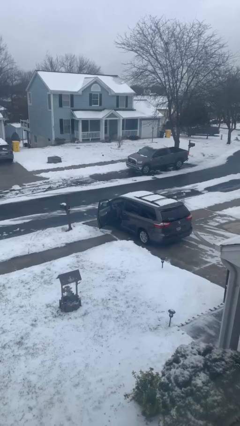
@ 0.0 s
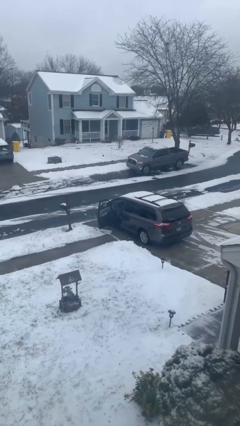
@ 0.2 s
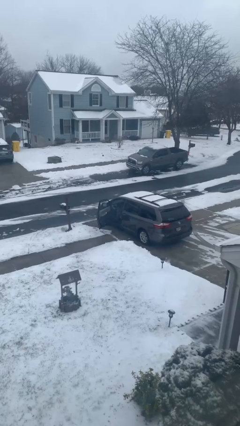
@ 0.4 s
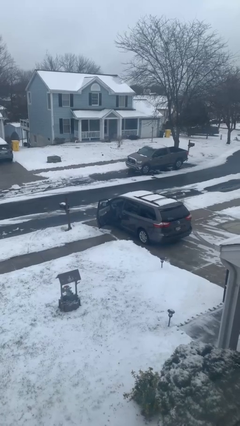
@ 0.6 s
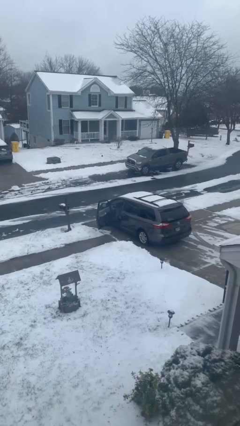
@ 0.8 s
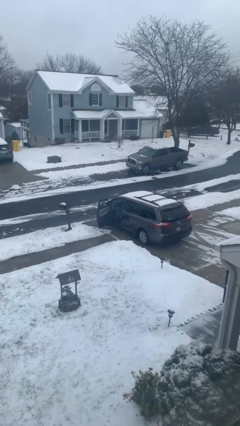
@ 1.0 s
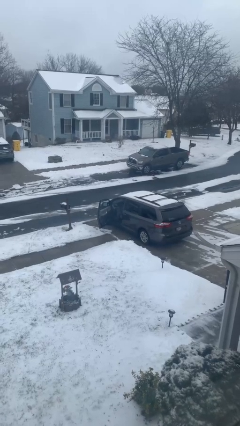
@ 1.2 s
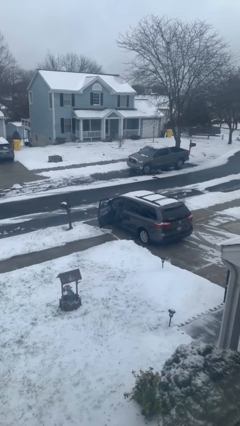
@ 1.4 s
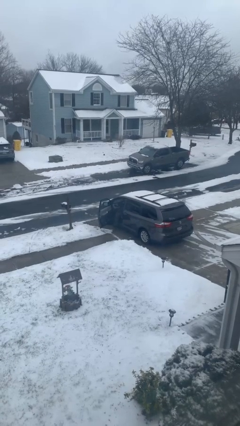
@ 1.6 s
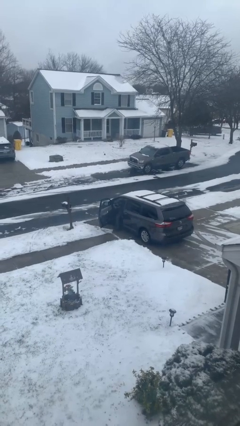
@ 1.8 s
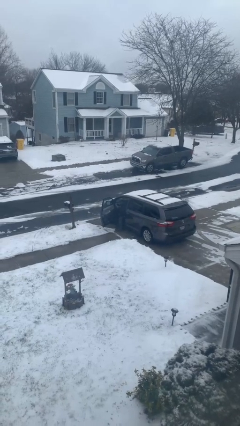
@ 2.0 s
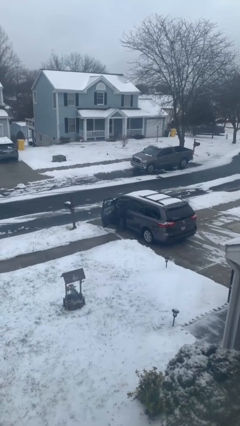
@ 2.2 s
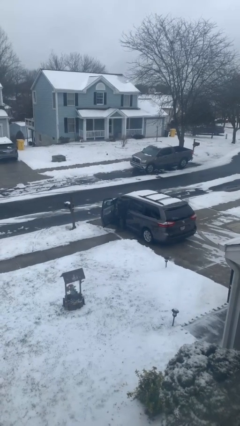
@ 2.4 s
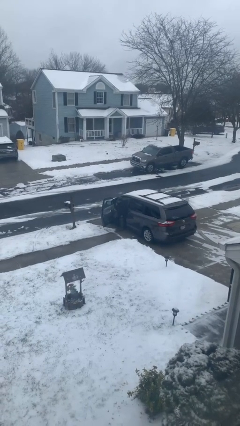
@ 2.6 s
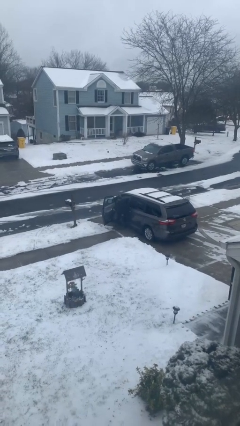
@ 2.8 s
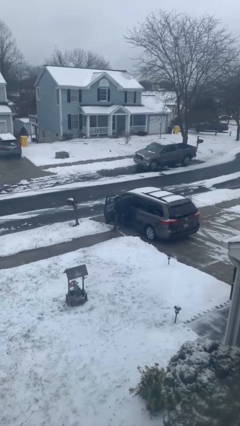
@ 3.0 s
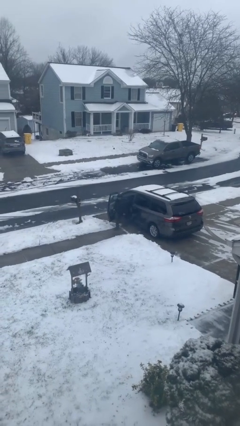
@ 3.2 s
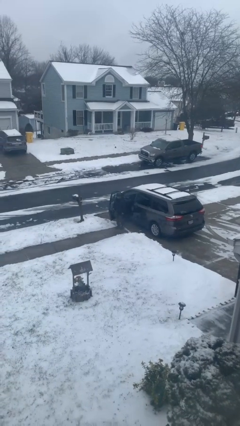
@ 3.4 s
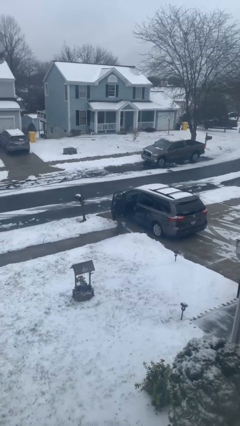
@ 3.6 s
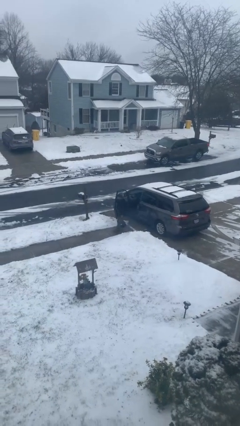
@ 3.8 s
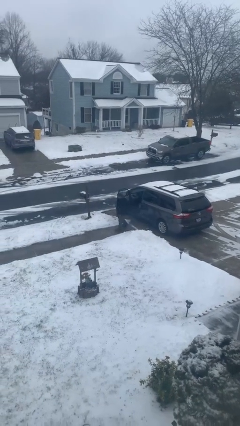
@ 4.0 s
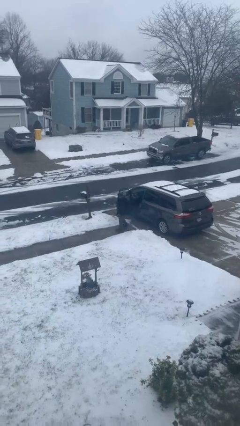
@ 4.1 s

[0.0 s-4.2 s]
person exits car

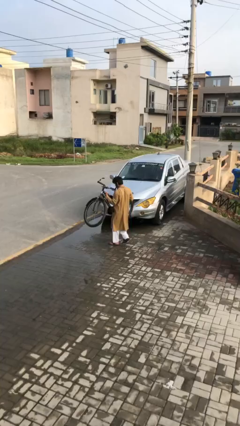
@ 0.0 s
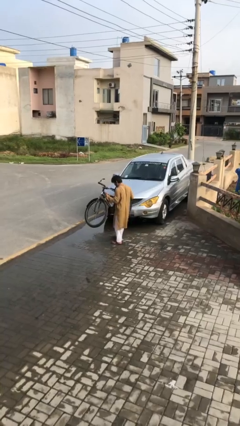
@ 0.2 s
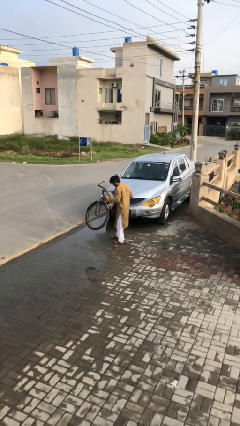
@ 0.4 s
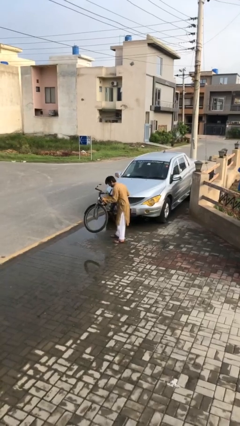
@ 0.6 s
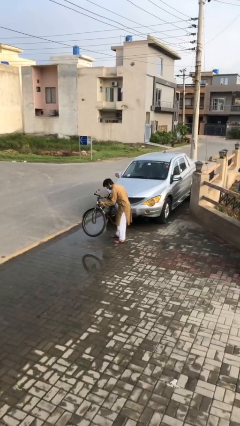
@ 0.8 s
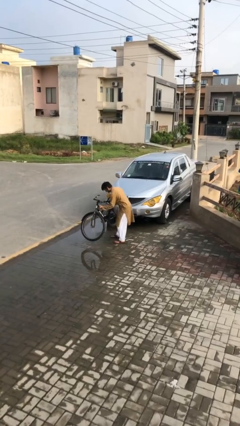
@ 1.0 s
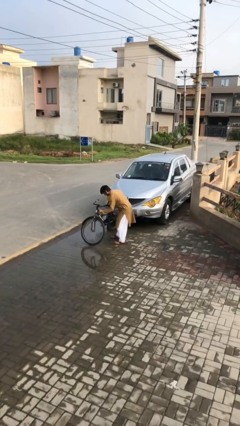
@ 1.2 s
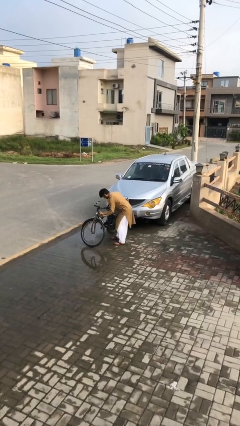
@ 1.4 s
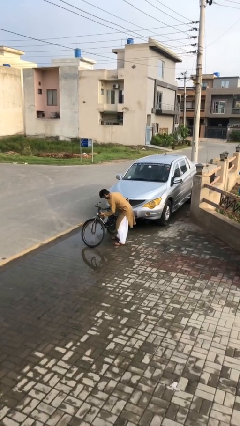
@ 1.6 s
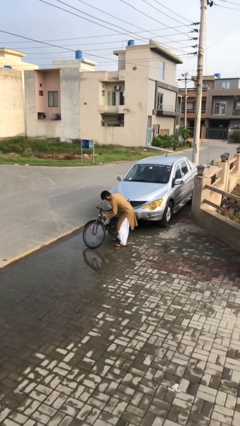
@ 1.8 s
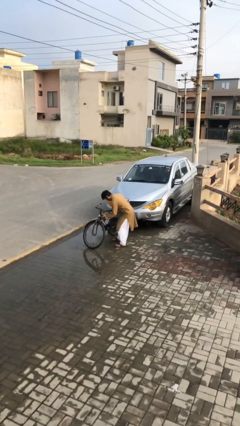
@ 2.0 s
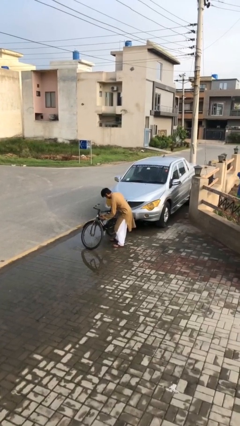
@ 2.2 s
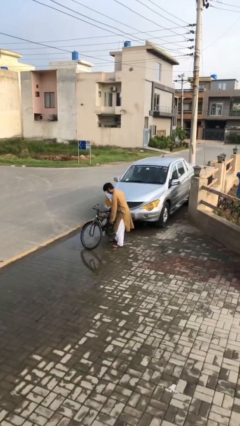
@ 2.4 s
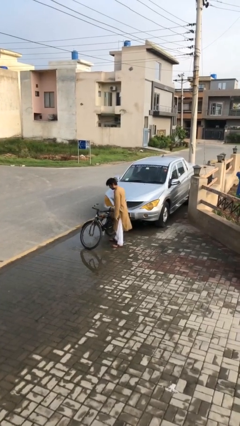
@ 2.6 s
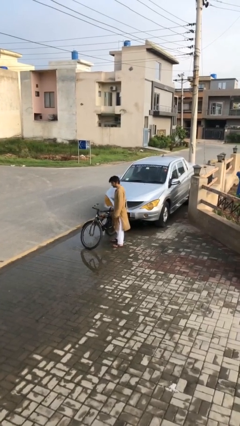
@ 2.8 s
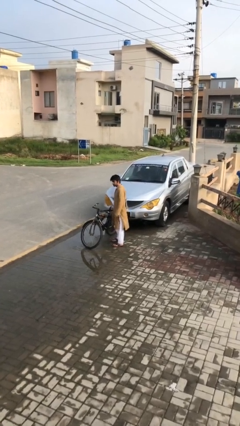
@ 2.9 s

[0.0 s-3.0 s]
person puts down object on floor

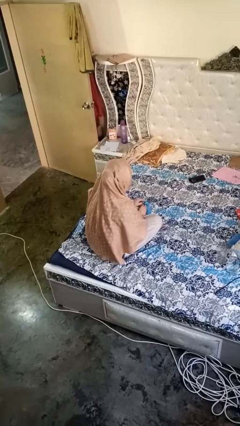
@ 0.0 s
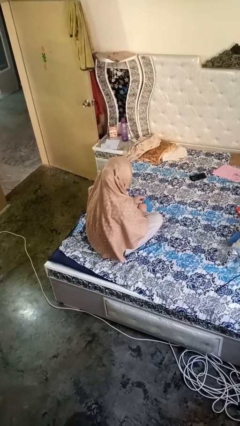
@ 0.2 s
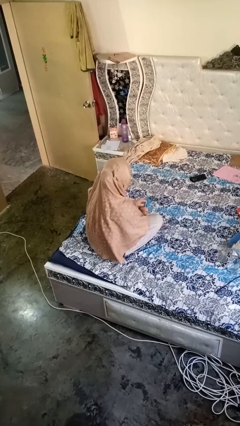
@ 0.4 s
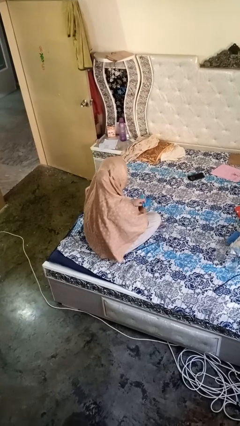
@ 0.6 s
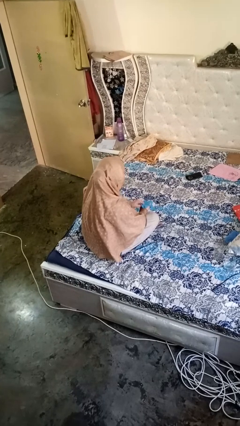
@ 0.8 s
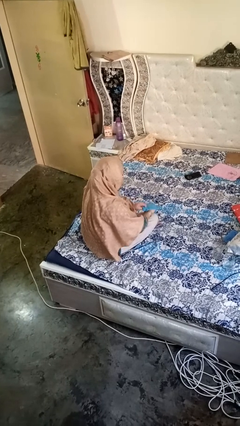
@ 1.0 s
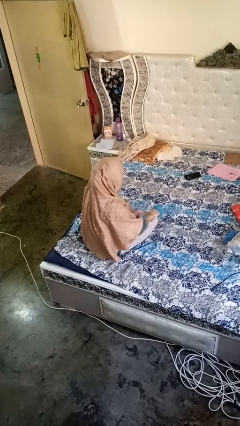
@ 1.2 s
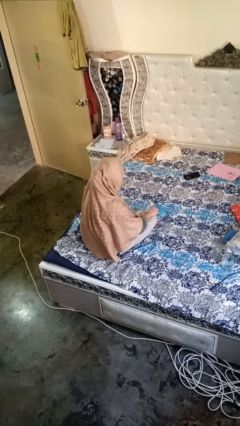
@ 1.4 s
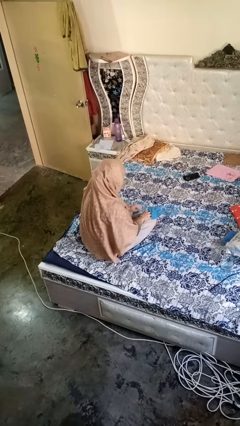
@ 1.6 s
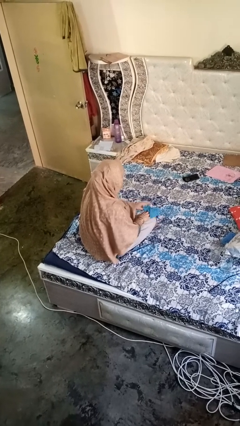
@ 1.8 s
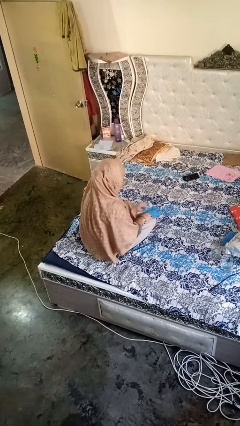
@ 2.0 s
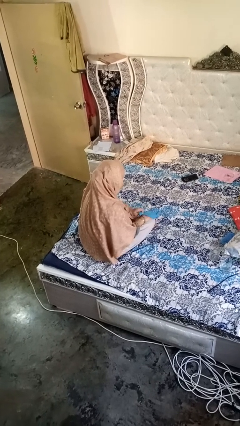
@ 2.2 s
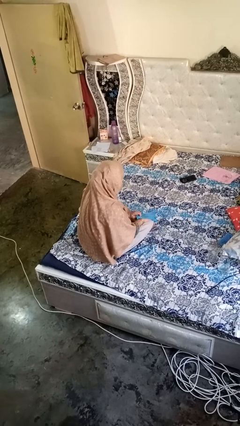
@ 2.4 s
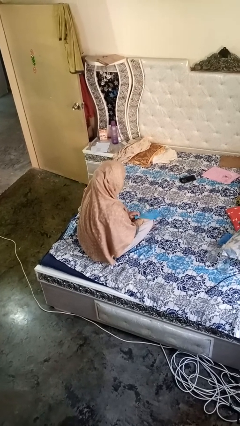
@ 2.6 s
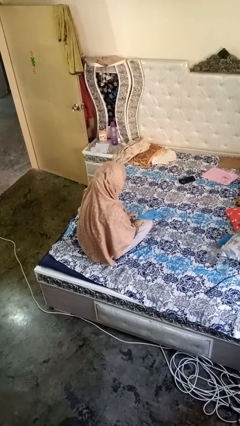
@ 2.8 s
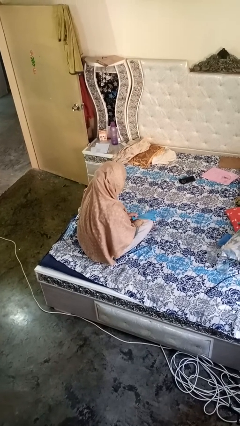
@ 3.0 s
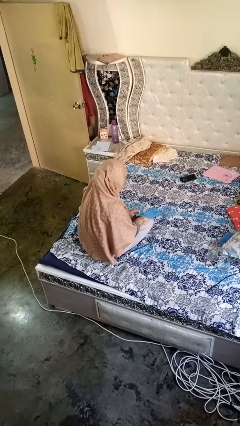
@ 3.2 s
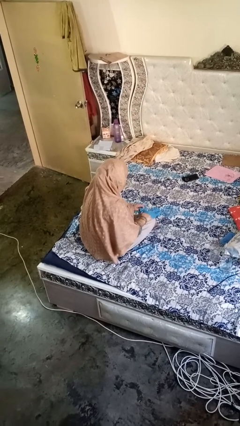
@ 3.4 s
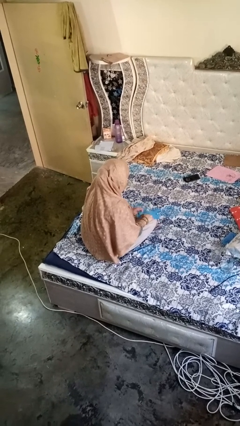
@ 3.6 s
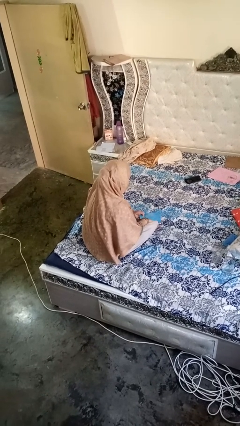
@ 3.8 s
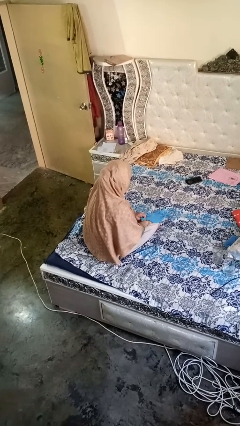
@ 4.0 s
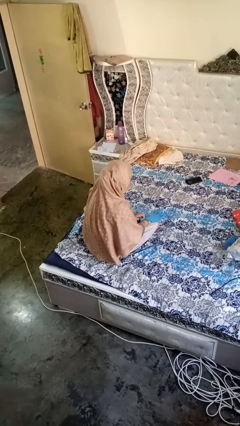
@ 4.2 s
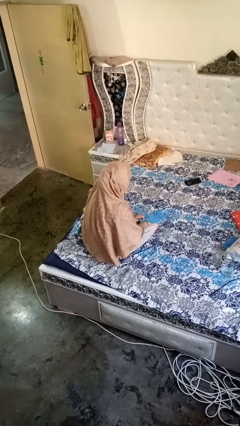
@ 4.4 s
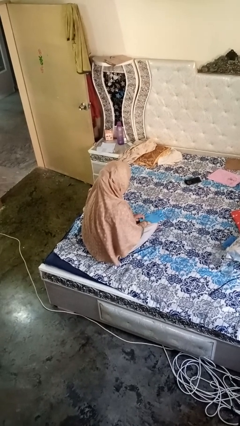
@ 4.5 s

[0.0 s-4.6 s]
person puts on gloves

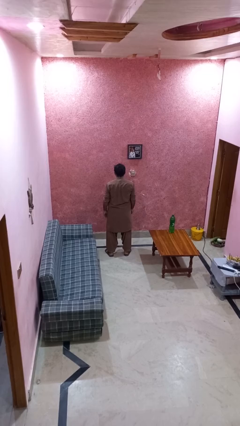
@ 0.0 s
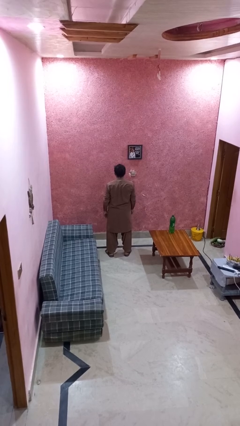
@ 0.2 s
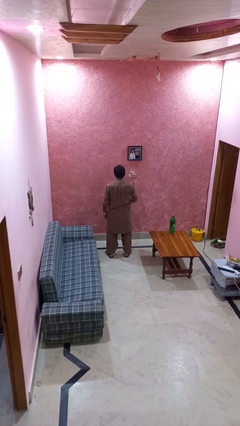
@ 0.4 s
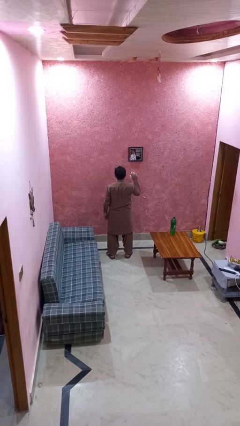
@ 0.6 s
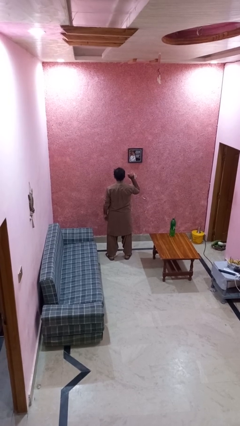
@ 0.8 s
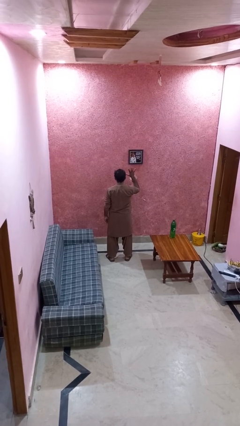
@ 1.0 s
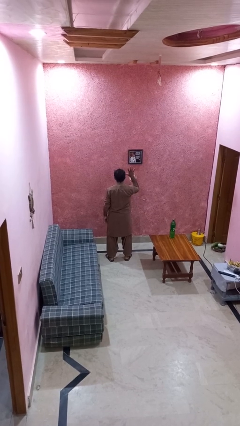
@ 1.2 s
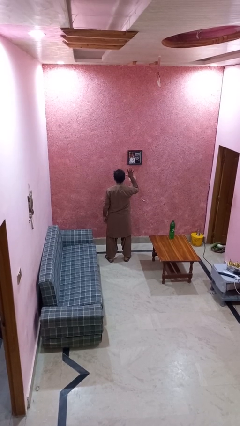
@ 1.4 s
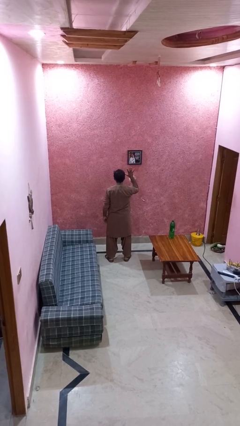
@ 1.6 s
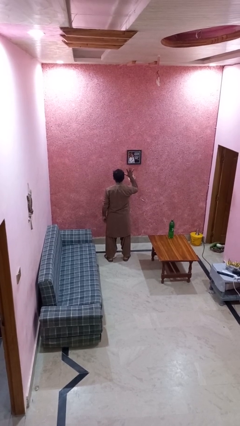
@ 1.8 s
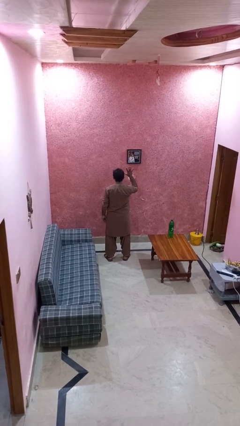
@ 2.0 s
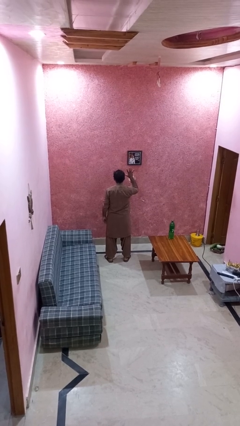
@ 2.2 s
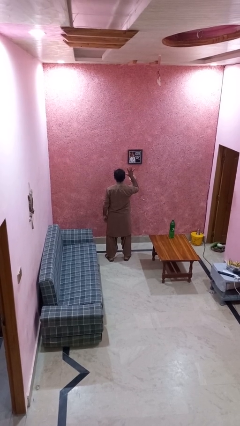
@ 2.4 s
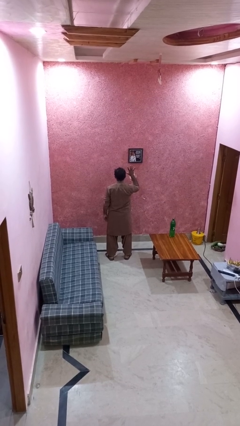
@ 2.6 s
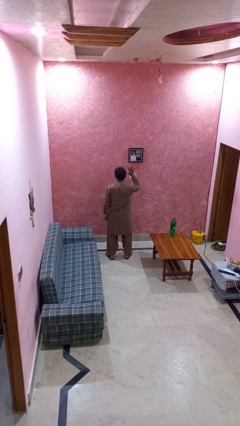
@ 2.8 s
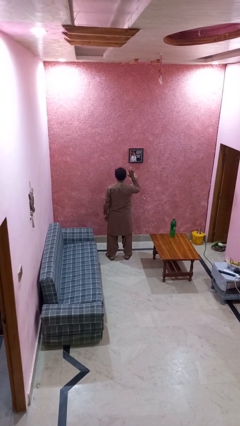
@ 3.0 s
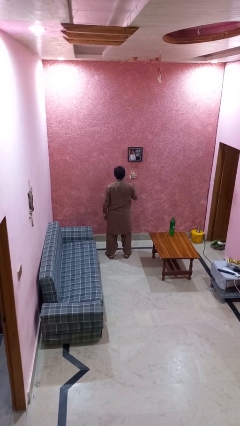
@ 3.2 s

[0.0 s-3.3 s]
person gestures number five

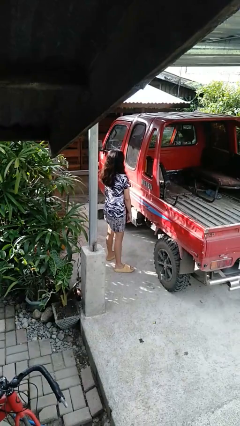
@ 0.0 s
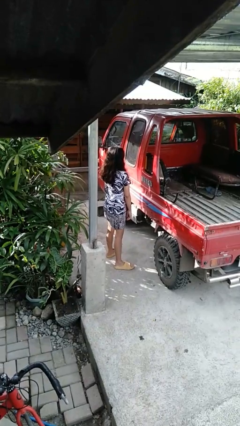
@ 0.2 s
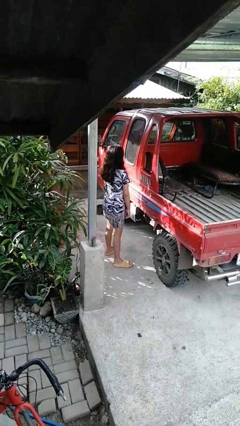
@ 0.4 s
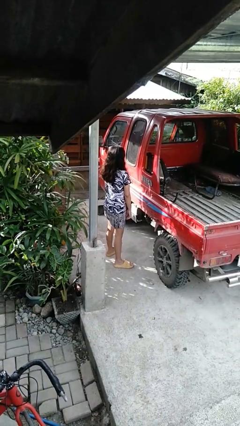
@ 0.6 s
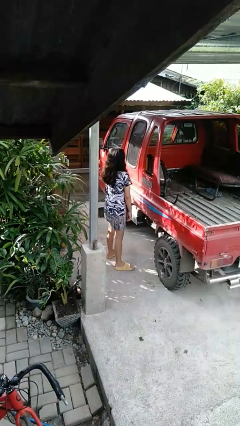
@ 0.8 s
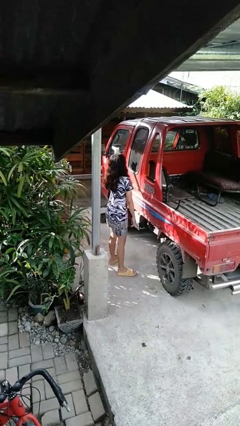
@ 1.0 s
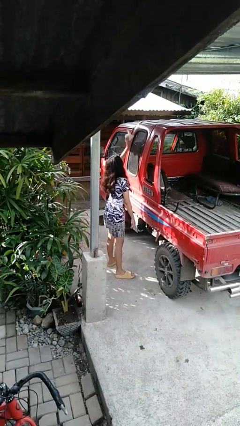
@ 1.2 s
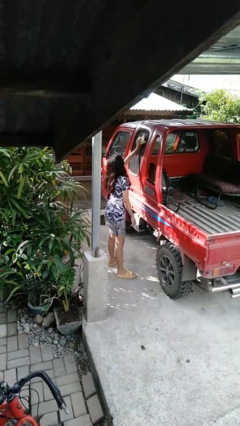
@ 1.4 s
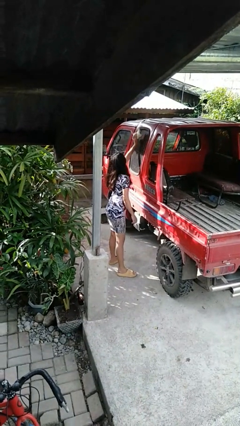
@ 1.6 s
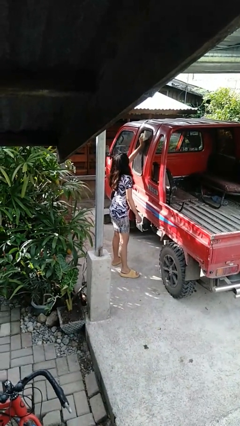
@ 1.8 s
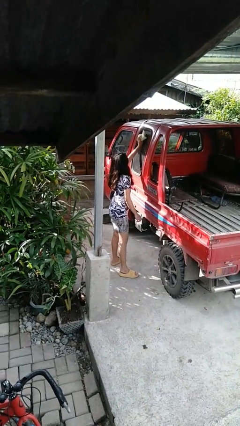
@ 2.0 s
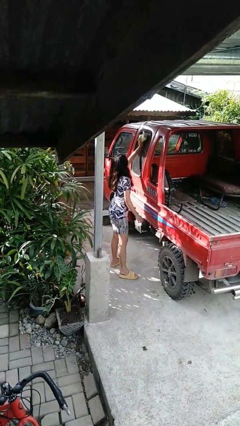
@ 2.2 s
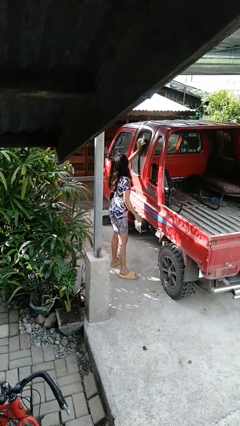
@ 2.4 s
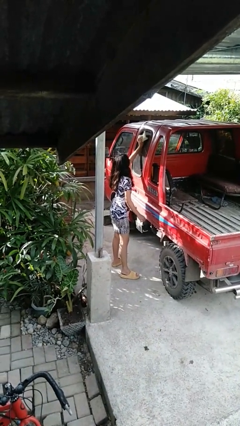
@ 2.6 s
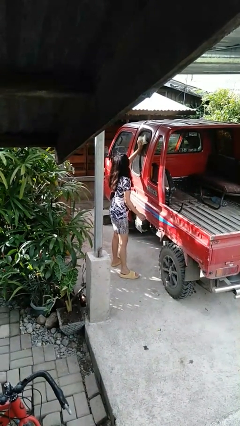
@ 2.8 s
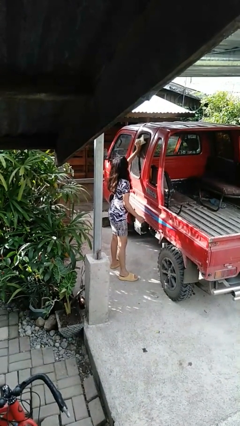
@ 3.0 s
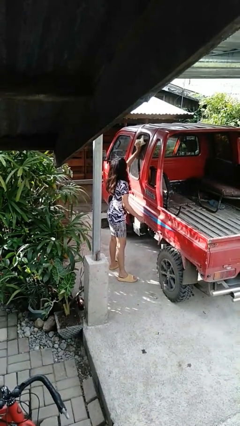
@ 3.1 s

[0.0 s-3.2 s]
person polishes car with rag
